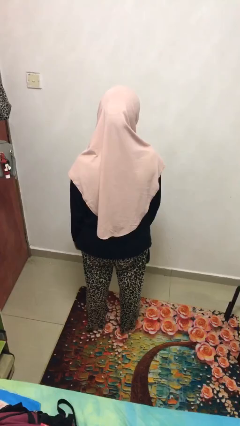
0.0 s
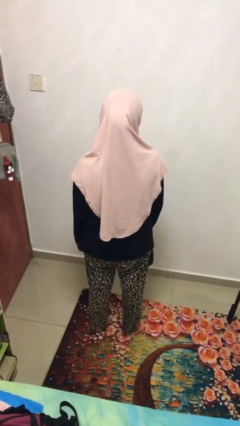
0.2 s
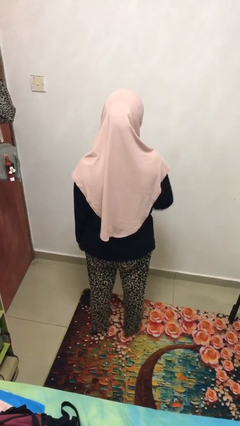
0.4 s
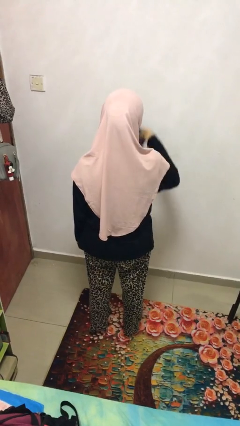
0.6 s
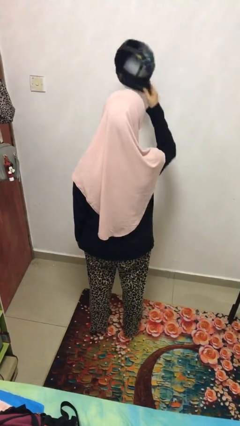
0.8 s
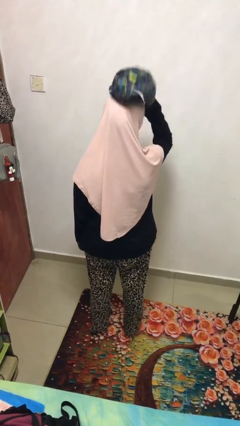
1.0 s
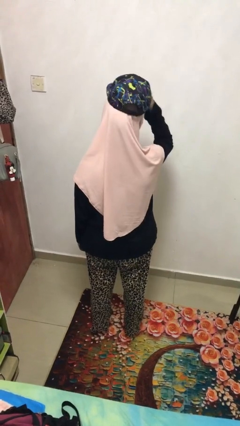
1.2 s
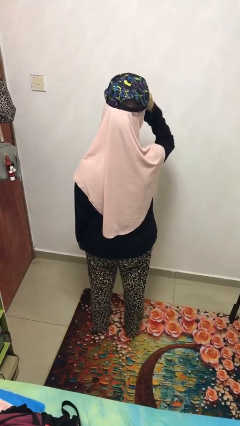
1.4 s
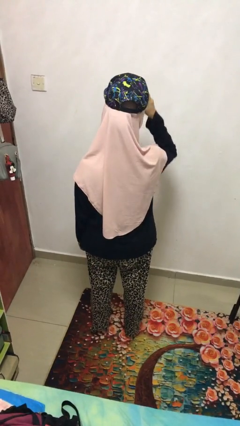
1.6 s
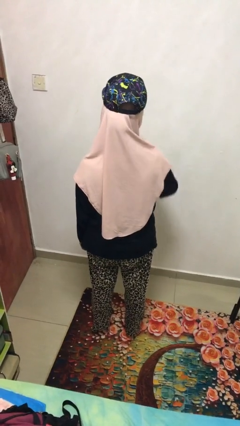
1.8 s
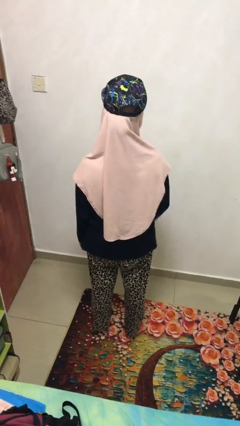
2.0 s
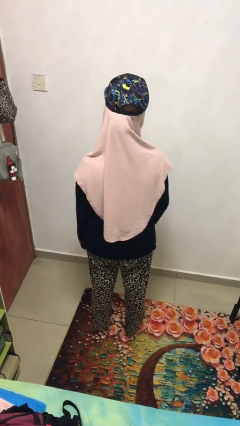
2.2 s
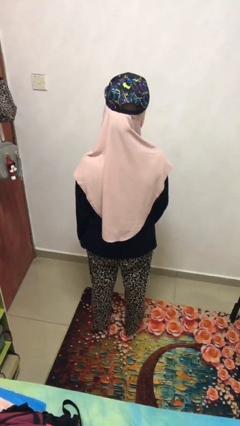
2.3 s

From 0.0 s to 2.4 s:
person puts on hat

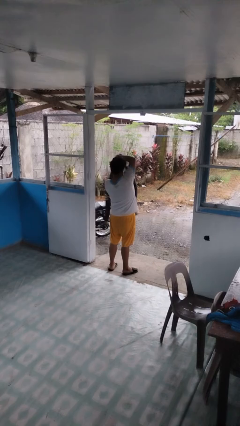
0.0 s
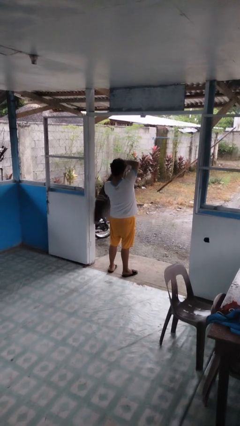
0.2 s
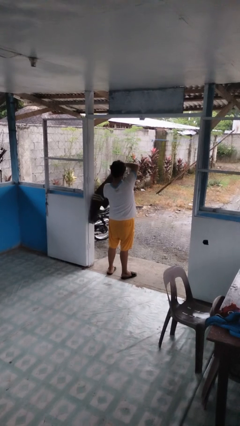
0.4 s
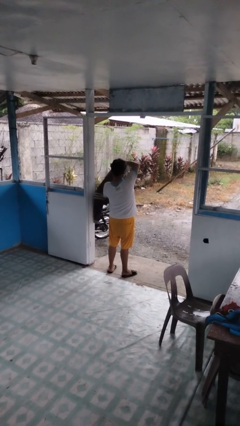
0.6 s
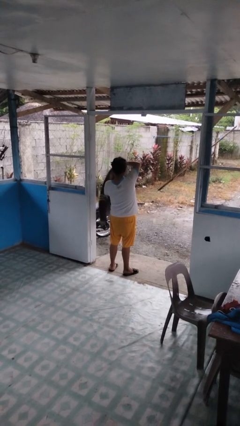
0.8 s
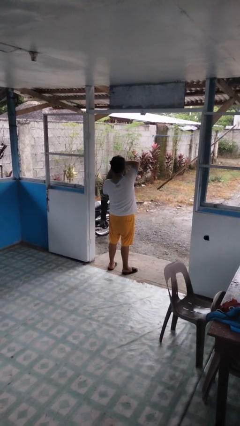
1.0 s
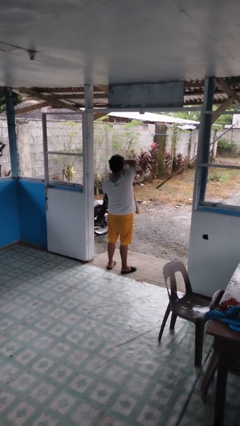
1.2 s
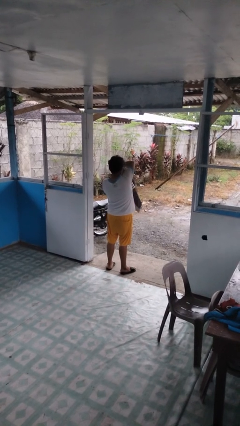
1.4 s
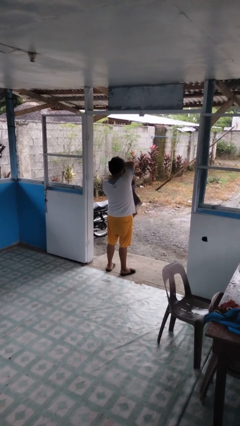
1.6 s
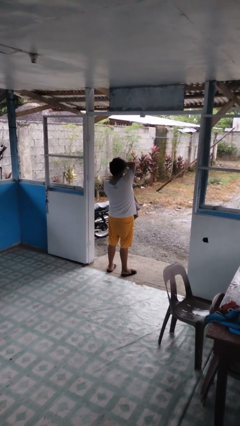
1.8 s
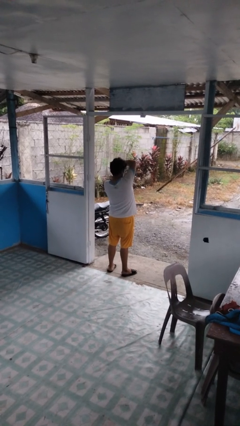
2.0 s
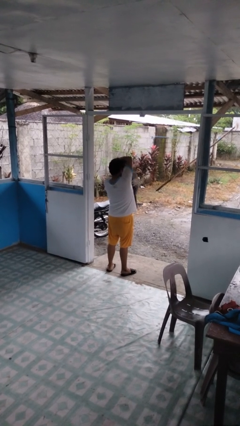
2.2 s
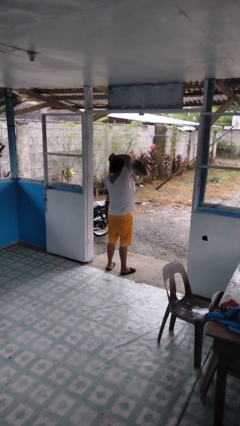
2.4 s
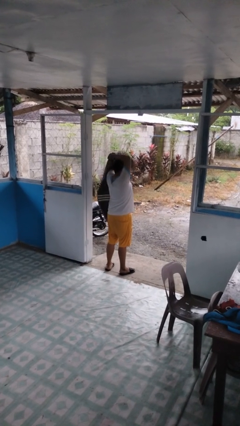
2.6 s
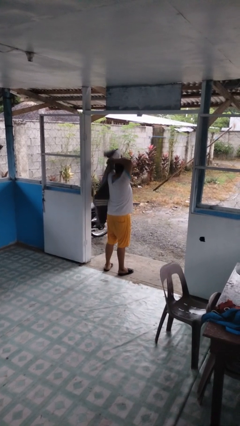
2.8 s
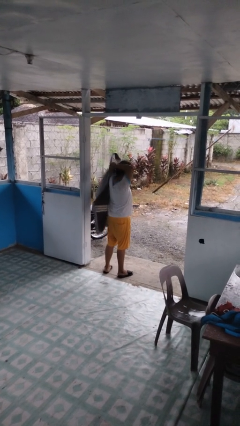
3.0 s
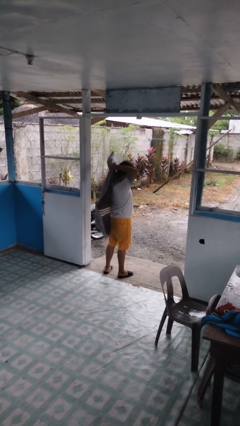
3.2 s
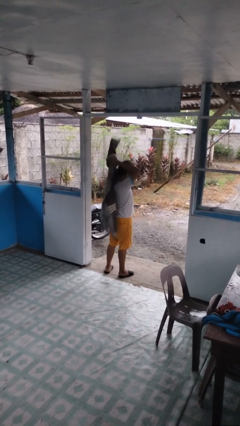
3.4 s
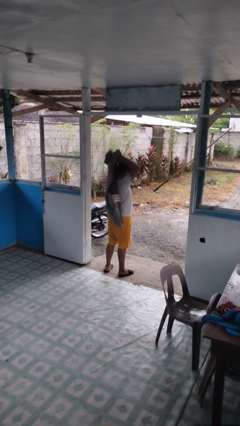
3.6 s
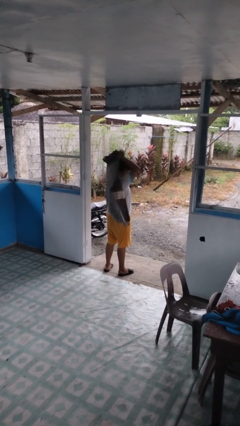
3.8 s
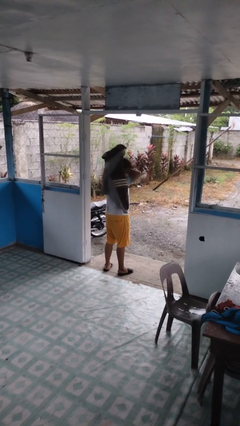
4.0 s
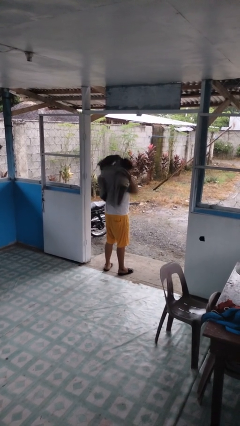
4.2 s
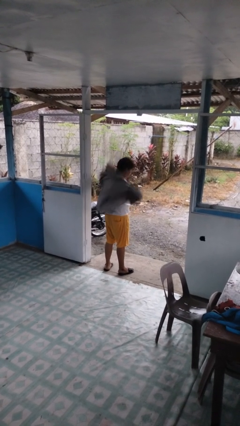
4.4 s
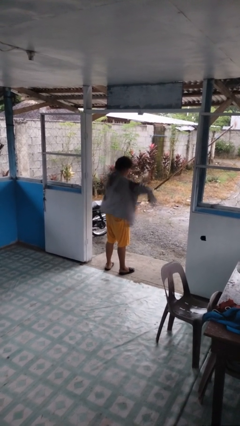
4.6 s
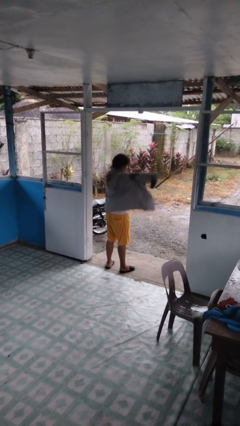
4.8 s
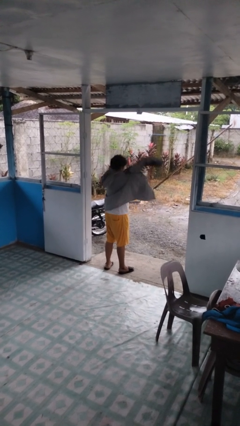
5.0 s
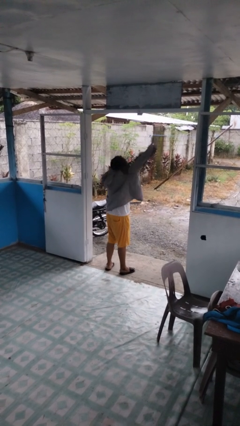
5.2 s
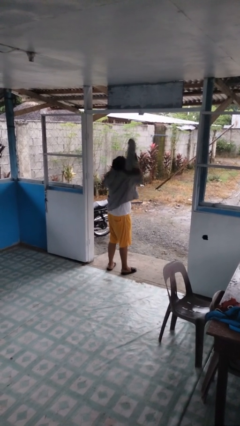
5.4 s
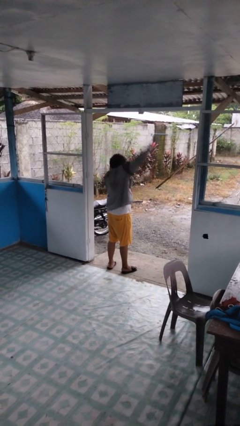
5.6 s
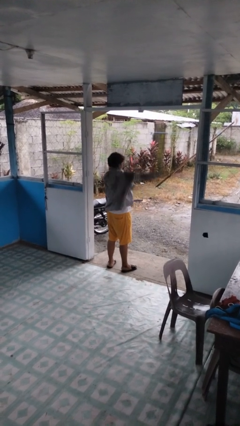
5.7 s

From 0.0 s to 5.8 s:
person puts on jacket

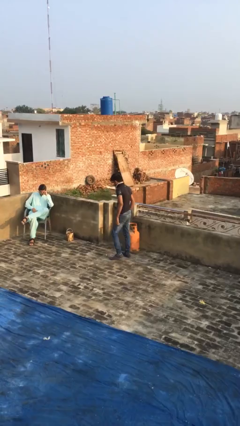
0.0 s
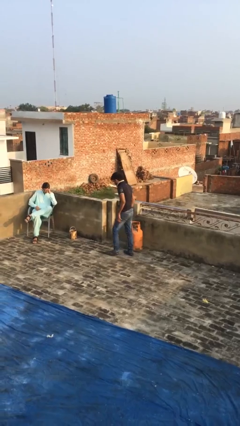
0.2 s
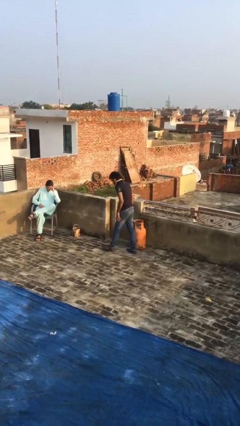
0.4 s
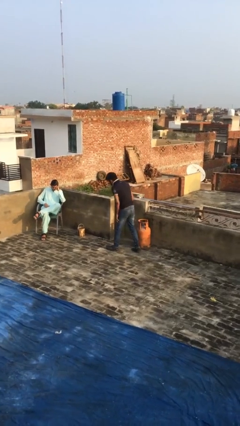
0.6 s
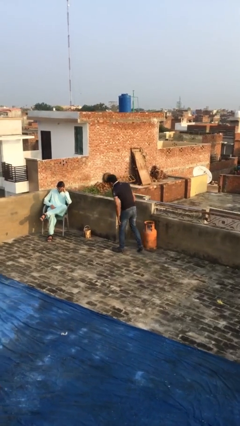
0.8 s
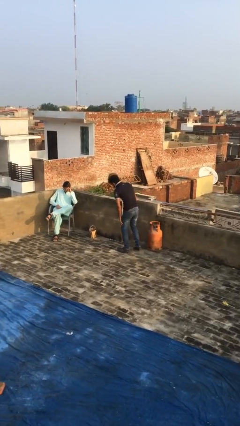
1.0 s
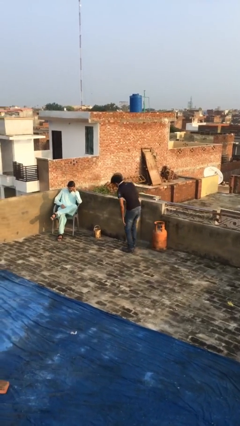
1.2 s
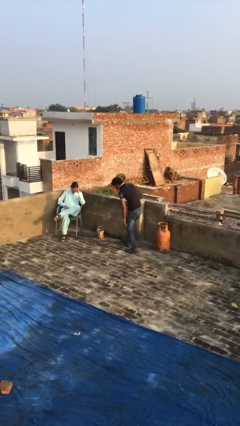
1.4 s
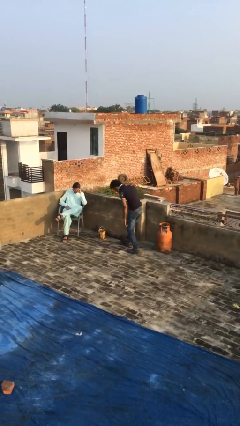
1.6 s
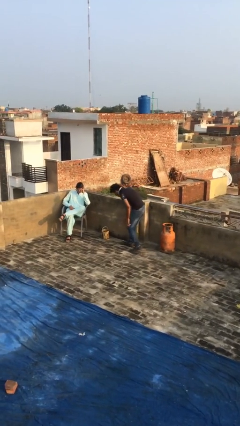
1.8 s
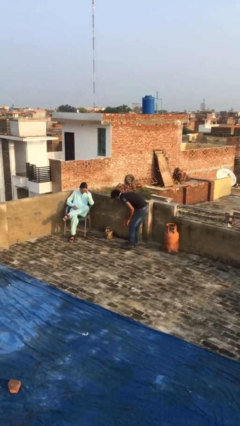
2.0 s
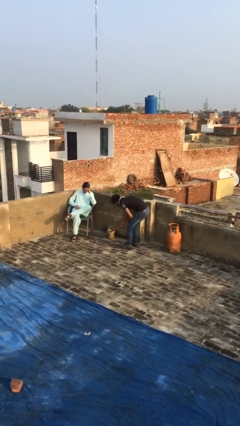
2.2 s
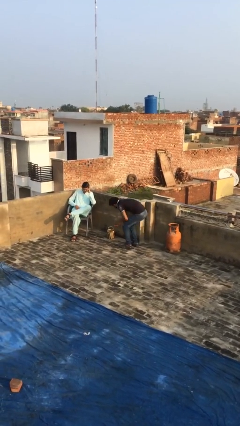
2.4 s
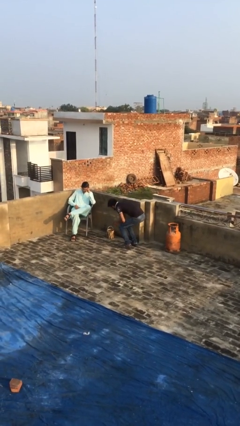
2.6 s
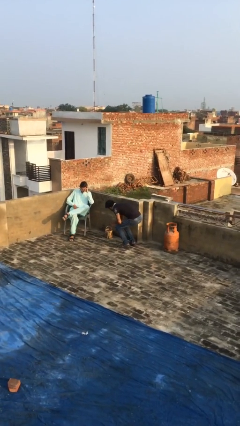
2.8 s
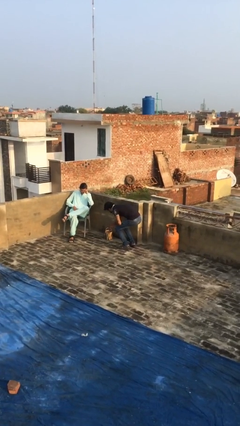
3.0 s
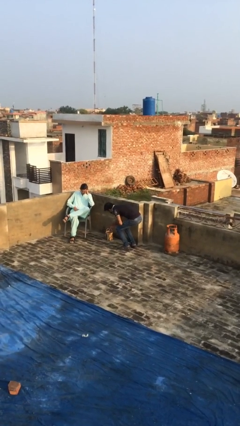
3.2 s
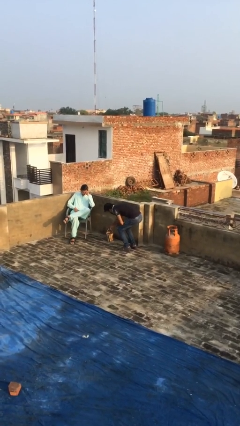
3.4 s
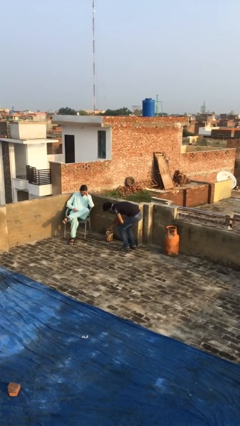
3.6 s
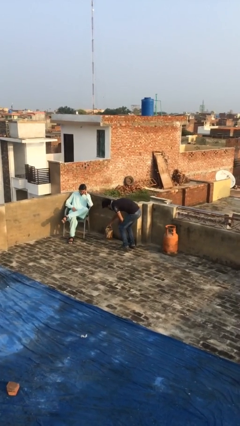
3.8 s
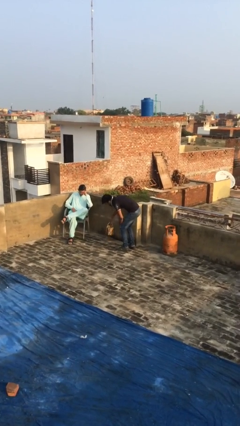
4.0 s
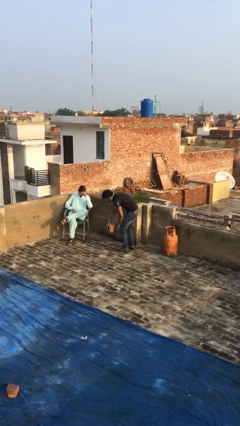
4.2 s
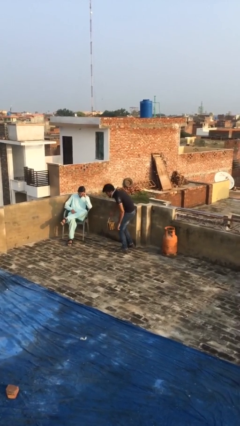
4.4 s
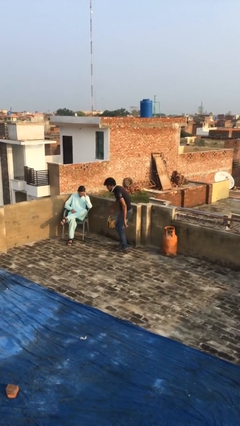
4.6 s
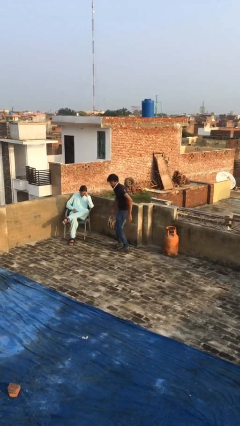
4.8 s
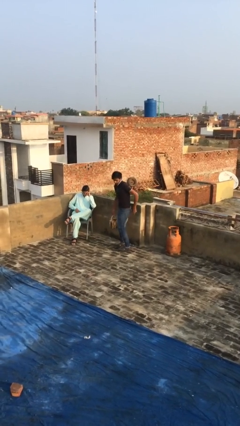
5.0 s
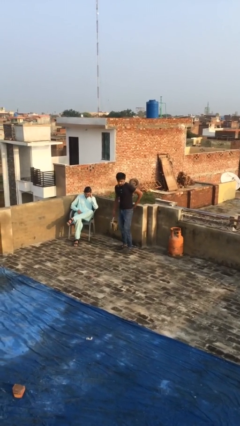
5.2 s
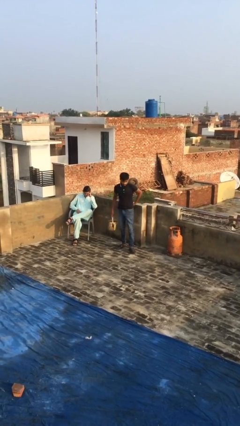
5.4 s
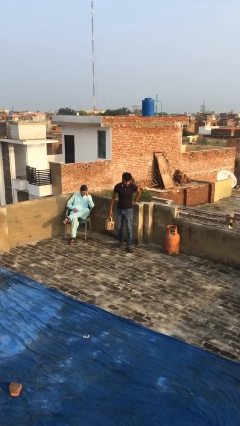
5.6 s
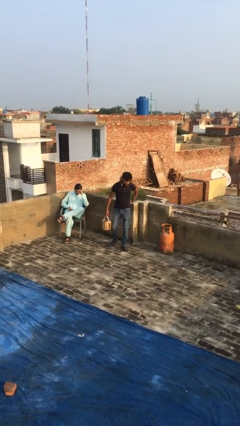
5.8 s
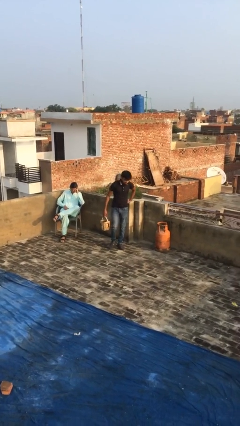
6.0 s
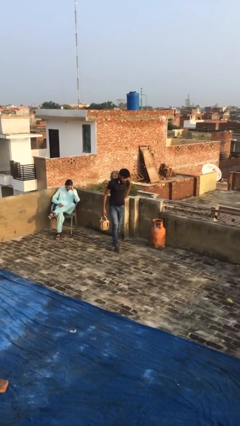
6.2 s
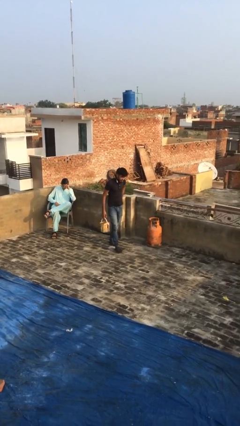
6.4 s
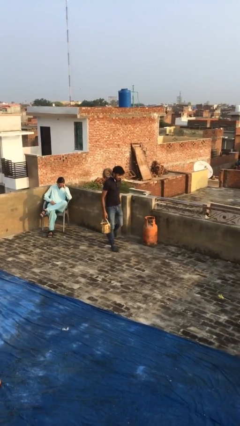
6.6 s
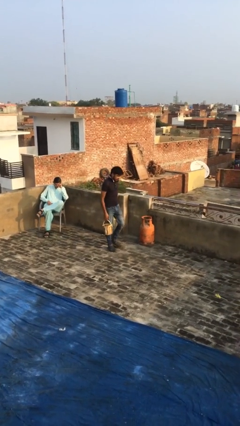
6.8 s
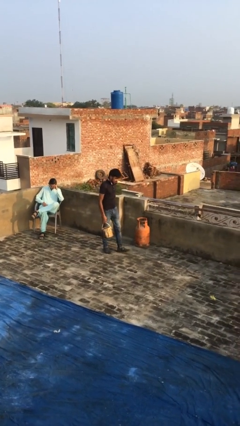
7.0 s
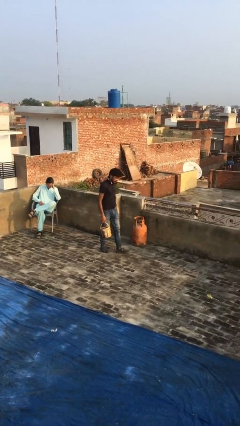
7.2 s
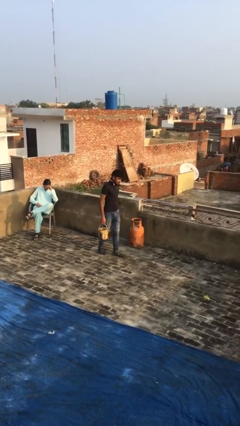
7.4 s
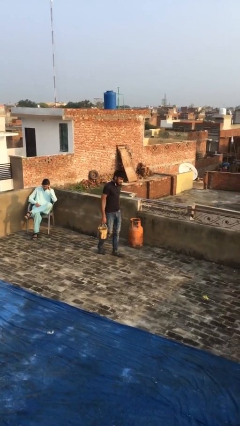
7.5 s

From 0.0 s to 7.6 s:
person steals object from person

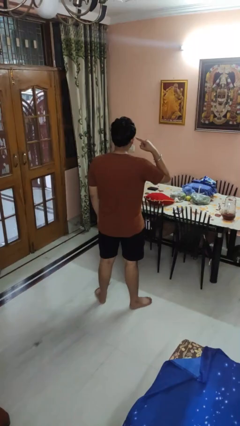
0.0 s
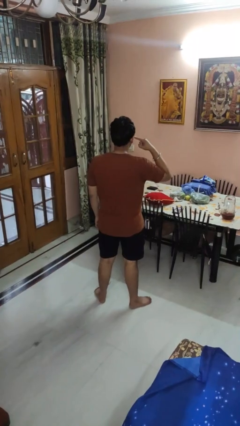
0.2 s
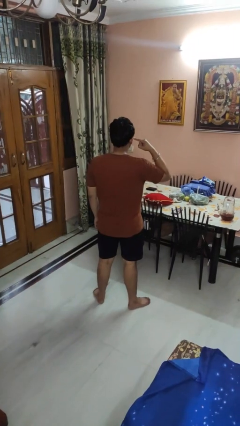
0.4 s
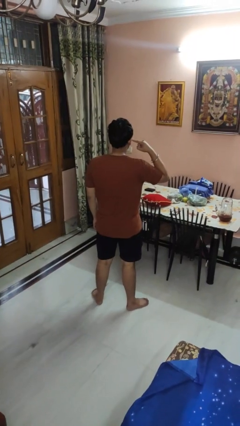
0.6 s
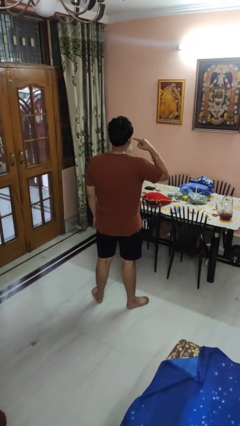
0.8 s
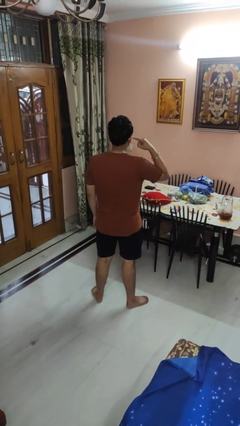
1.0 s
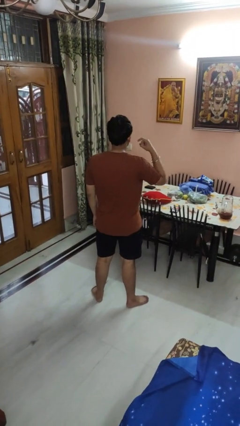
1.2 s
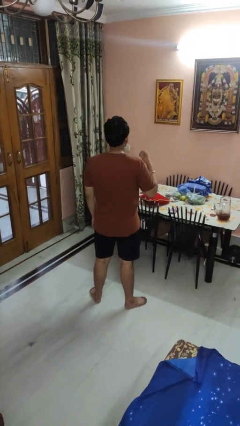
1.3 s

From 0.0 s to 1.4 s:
person gestures listen closely

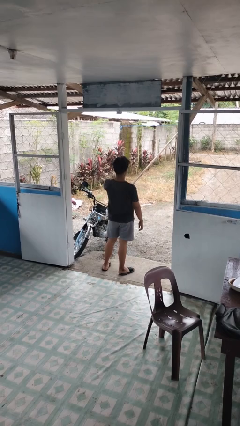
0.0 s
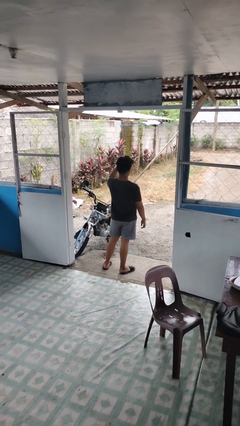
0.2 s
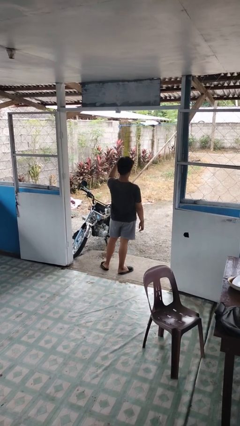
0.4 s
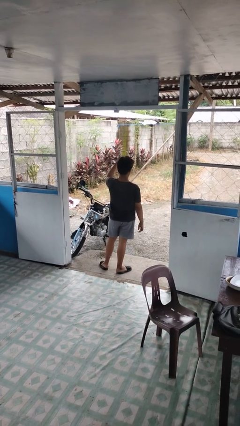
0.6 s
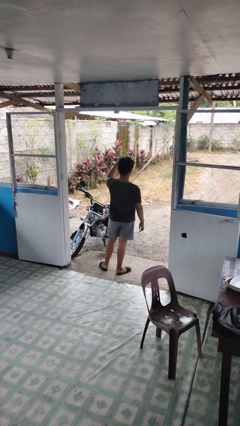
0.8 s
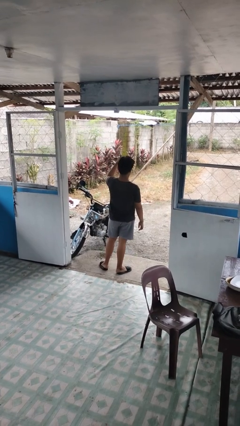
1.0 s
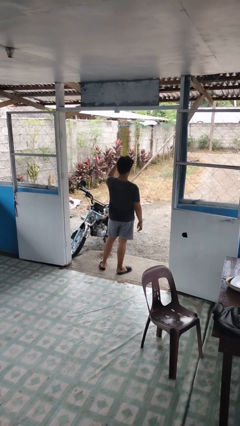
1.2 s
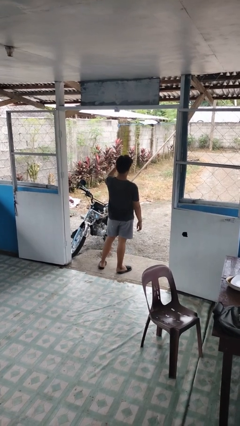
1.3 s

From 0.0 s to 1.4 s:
person gestures thumbs up
